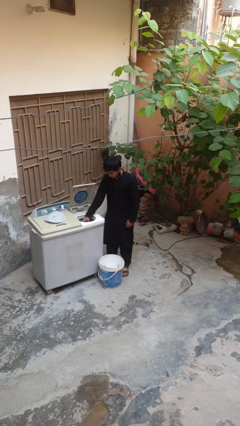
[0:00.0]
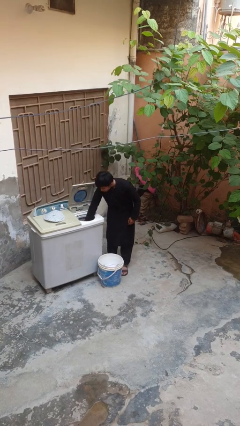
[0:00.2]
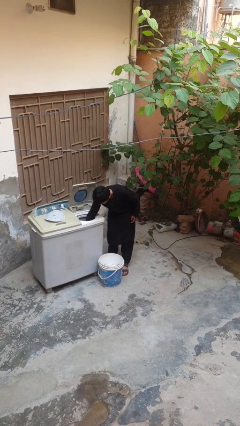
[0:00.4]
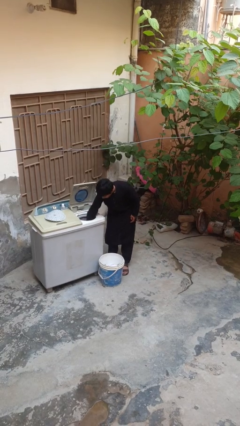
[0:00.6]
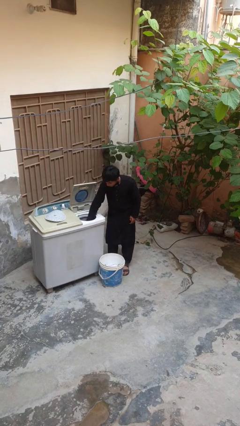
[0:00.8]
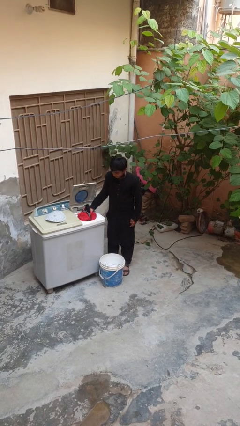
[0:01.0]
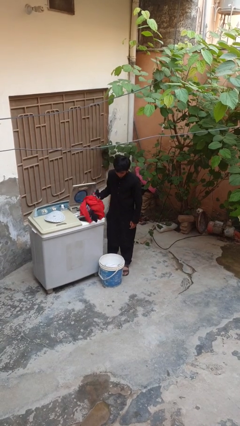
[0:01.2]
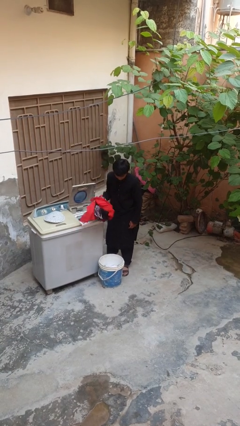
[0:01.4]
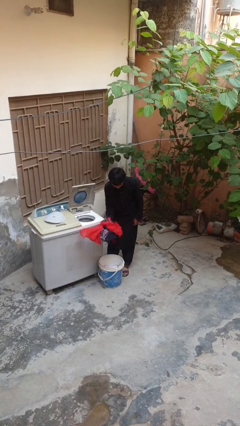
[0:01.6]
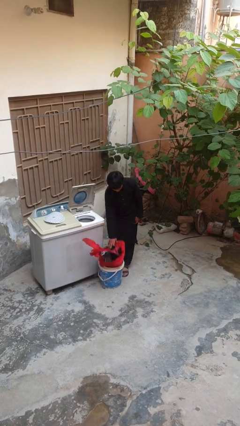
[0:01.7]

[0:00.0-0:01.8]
person unloads dryer

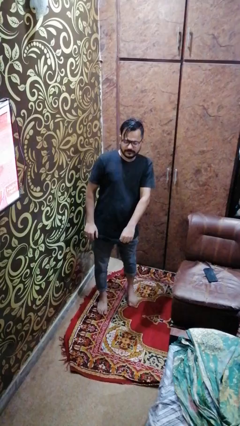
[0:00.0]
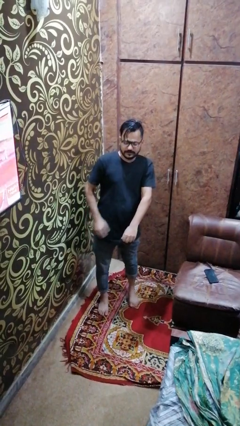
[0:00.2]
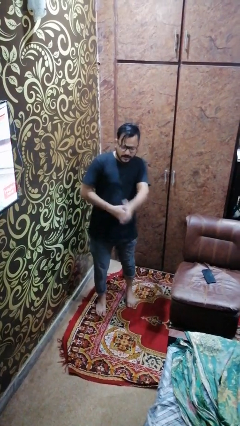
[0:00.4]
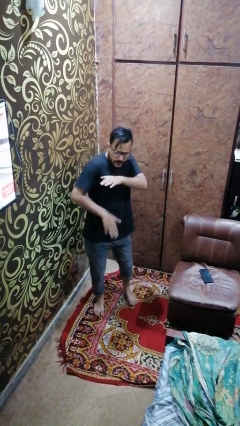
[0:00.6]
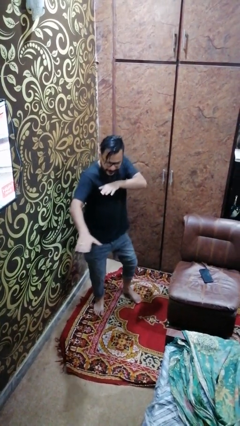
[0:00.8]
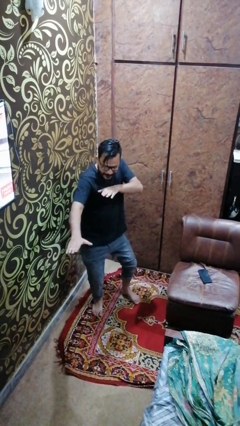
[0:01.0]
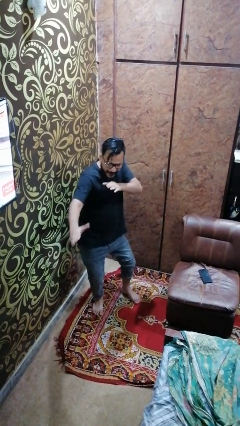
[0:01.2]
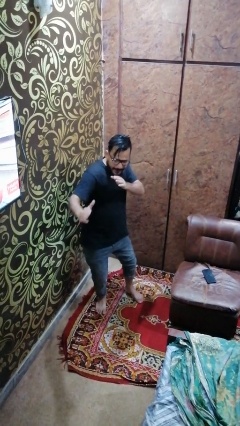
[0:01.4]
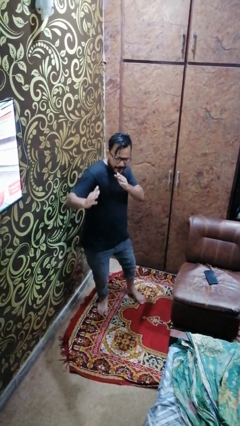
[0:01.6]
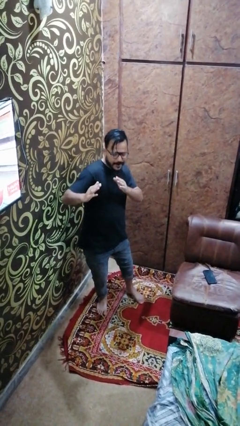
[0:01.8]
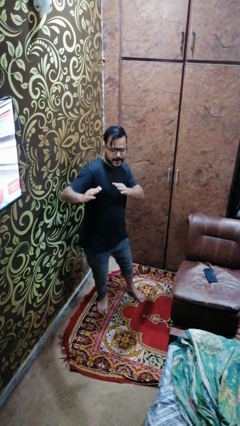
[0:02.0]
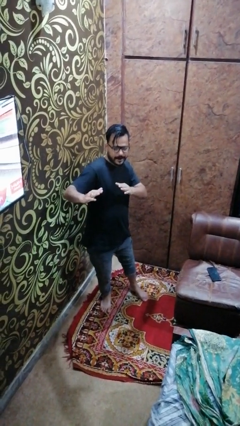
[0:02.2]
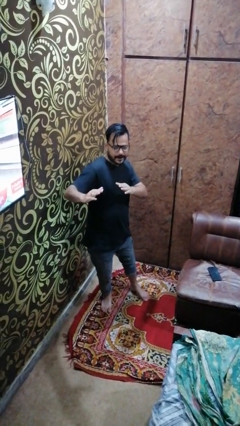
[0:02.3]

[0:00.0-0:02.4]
person karate chop

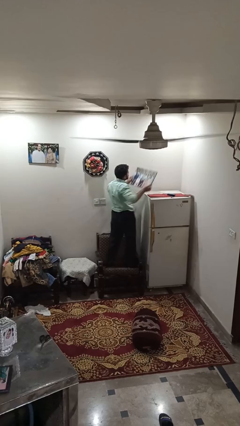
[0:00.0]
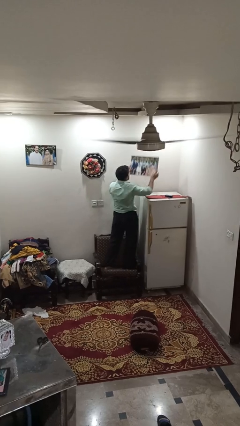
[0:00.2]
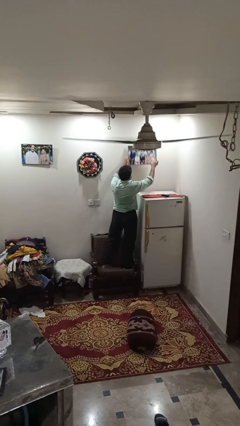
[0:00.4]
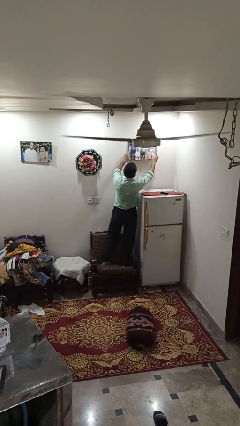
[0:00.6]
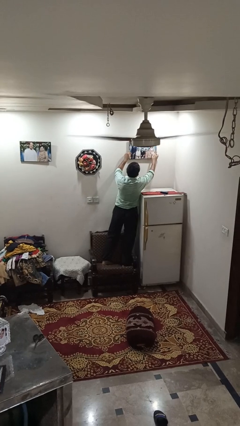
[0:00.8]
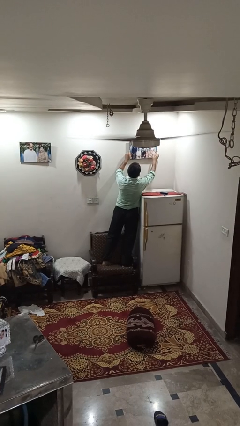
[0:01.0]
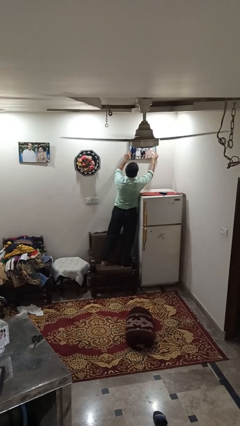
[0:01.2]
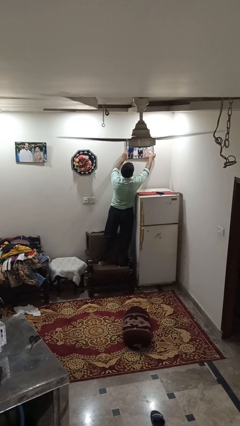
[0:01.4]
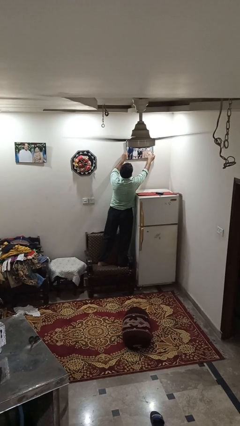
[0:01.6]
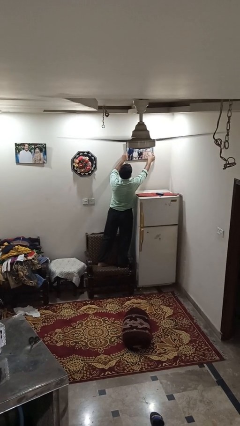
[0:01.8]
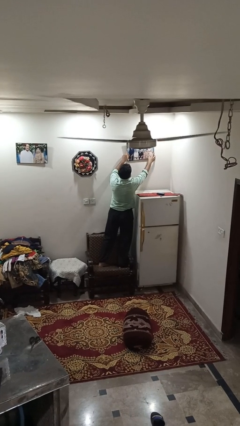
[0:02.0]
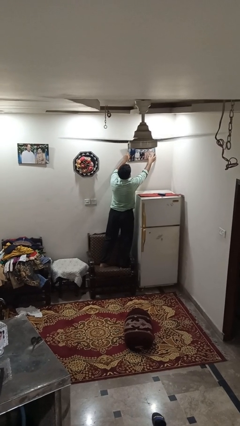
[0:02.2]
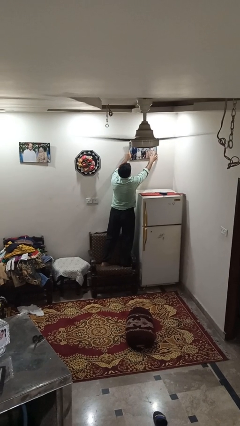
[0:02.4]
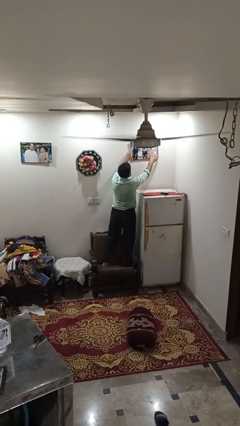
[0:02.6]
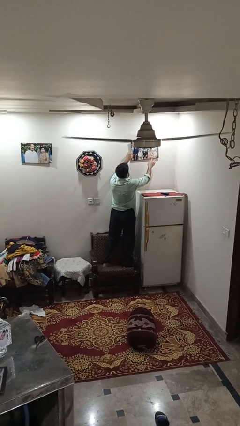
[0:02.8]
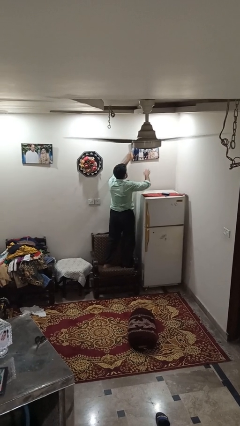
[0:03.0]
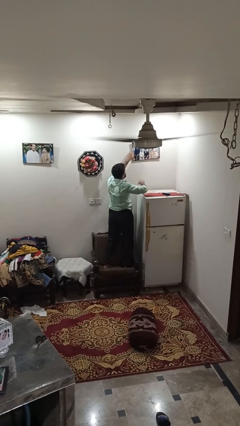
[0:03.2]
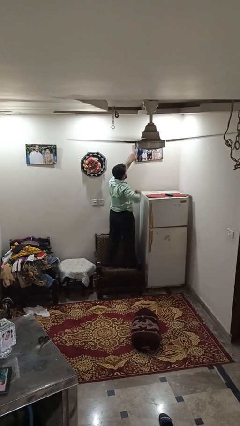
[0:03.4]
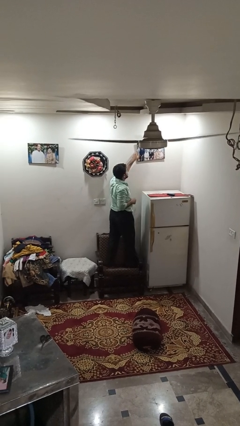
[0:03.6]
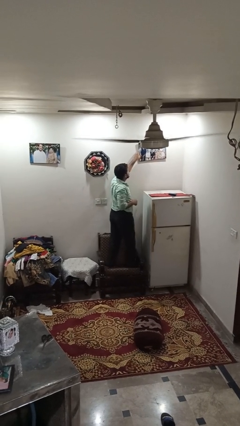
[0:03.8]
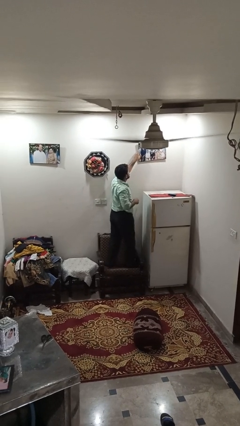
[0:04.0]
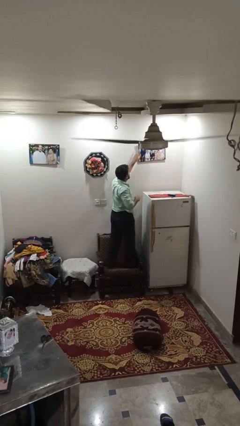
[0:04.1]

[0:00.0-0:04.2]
person puts up picture frame

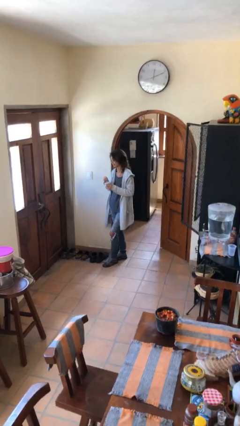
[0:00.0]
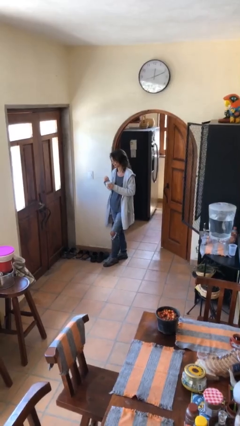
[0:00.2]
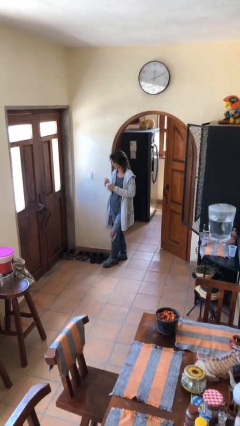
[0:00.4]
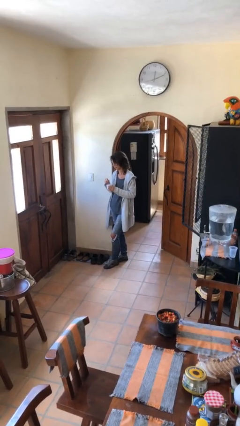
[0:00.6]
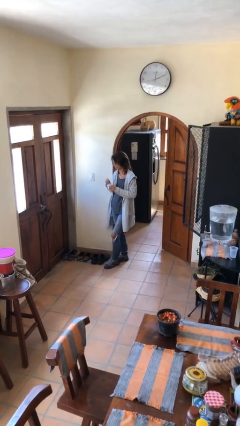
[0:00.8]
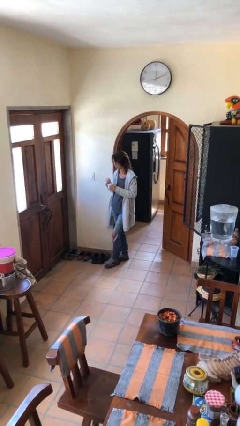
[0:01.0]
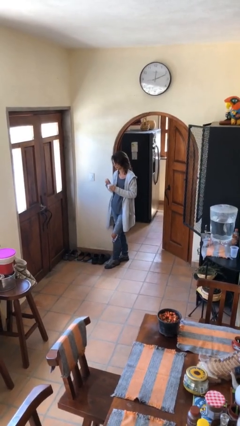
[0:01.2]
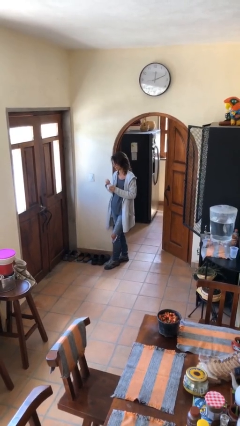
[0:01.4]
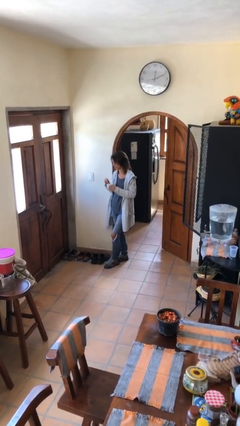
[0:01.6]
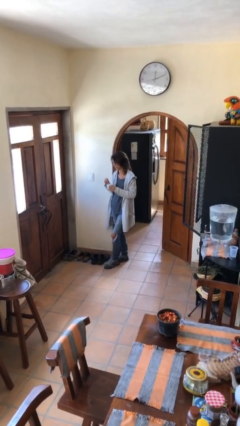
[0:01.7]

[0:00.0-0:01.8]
person stirs mug

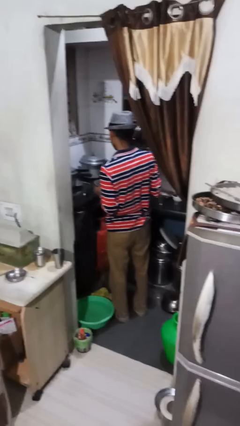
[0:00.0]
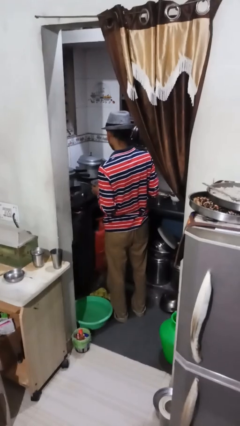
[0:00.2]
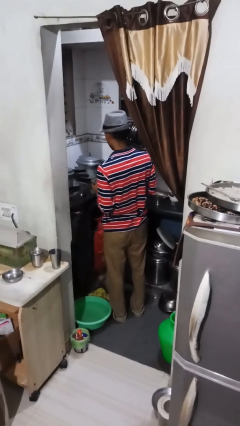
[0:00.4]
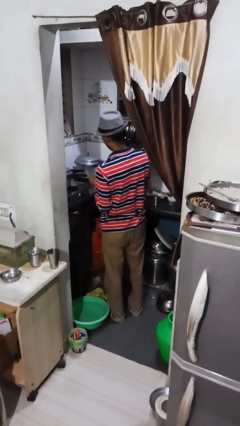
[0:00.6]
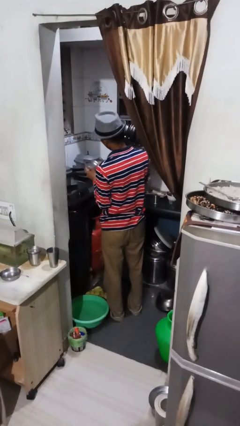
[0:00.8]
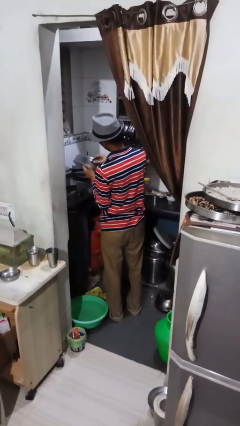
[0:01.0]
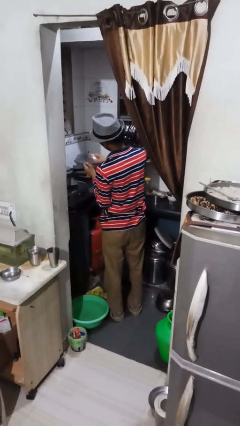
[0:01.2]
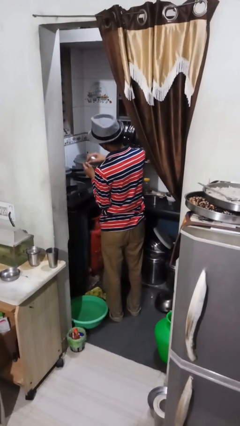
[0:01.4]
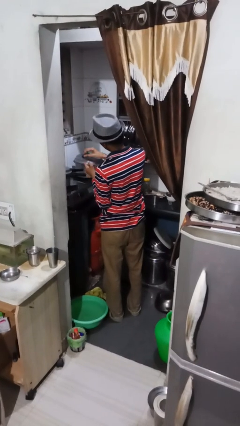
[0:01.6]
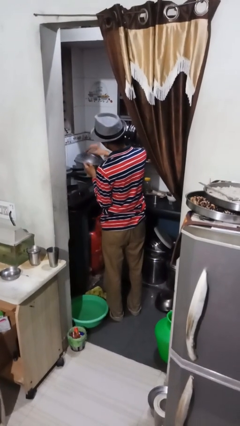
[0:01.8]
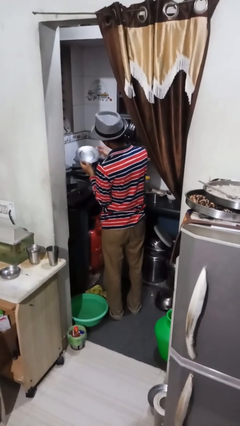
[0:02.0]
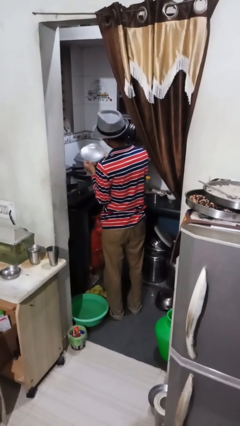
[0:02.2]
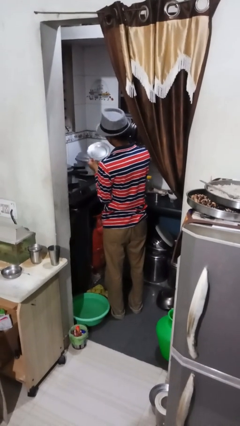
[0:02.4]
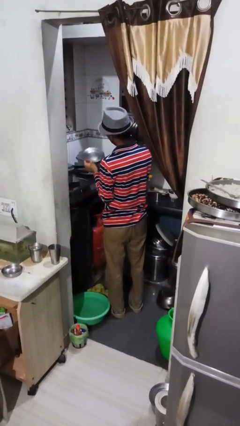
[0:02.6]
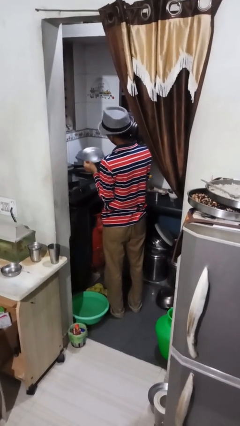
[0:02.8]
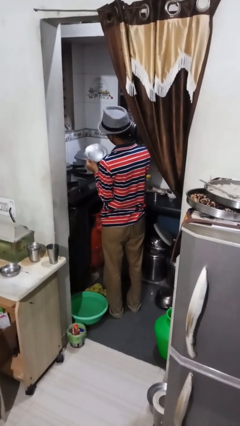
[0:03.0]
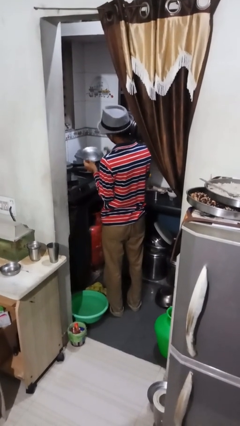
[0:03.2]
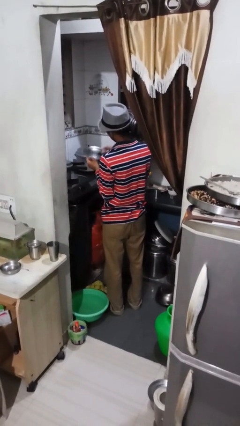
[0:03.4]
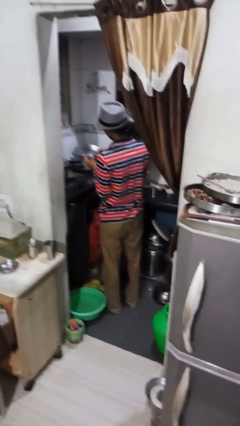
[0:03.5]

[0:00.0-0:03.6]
person washes dish

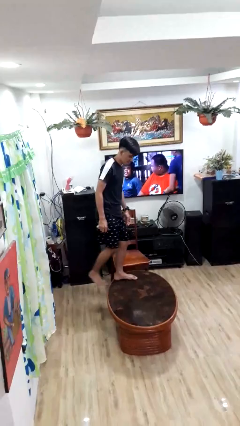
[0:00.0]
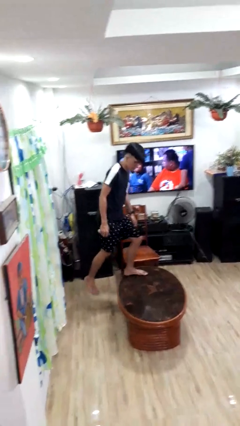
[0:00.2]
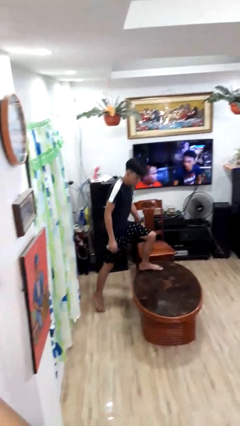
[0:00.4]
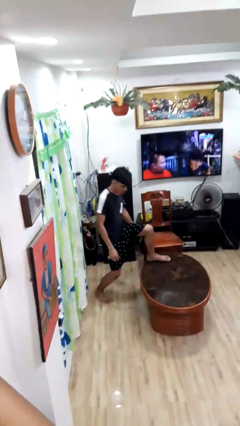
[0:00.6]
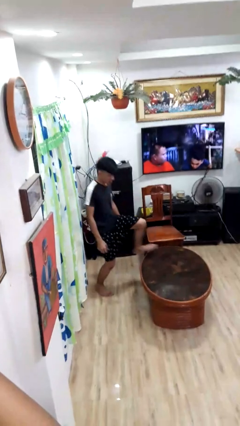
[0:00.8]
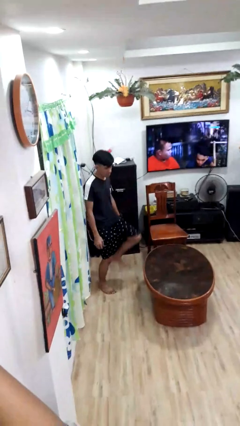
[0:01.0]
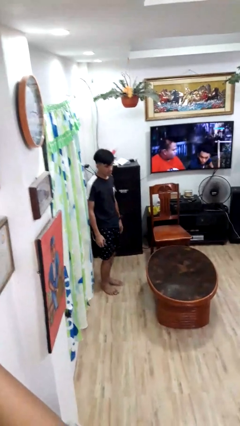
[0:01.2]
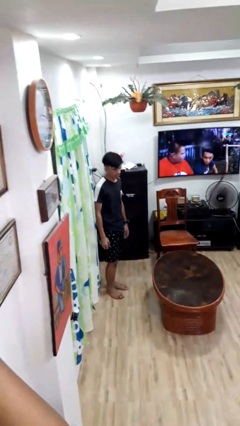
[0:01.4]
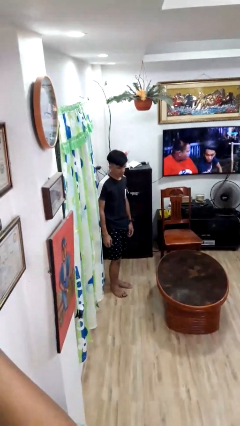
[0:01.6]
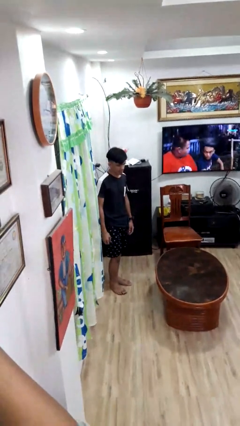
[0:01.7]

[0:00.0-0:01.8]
person climbs off table

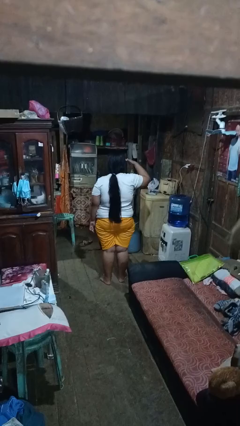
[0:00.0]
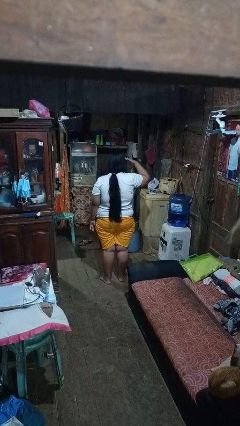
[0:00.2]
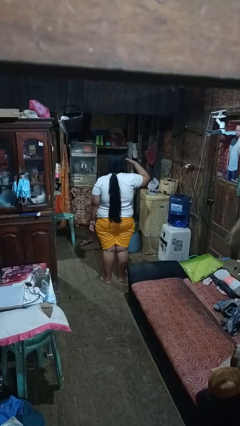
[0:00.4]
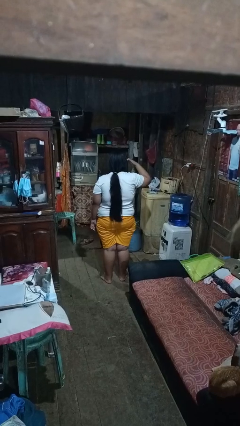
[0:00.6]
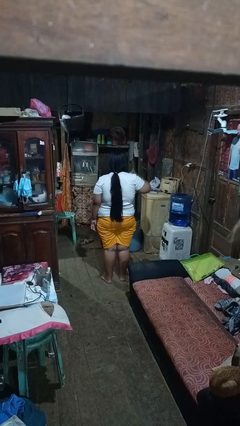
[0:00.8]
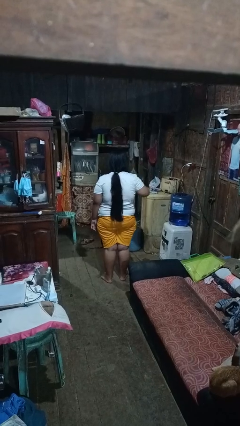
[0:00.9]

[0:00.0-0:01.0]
person salutes

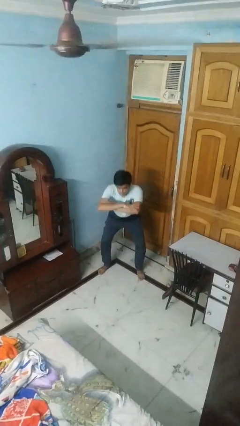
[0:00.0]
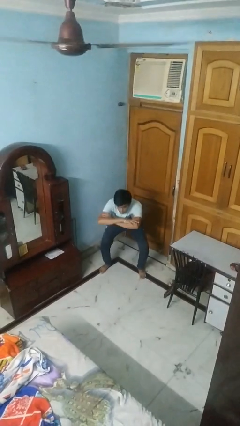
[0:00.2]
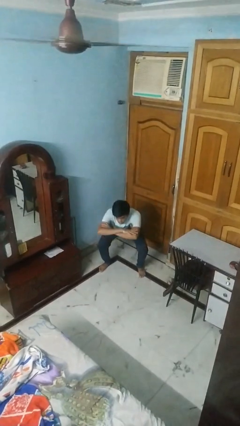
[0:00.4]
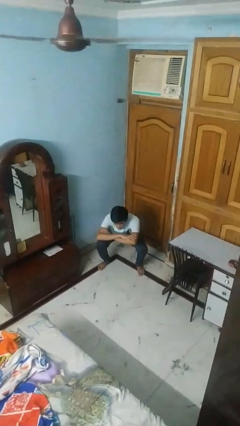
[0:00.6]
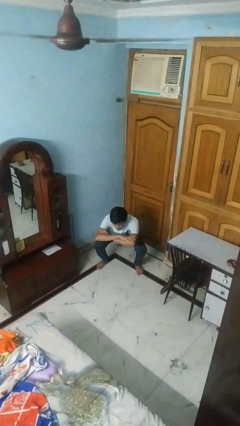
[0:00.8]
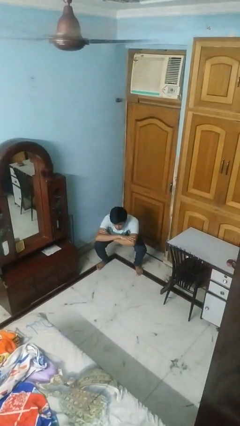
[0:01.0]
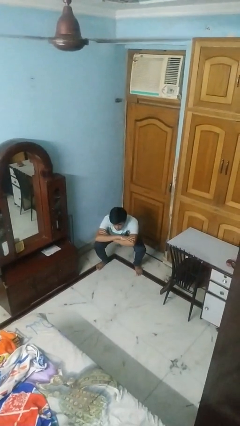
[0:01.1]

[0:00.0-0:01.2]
person squats
